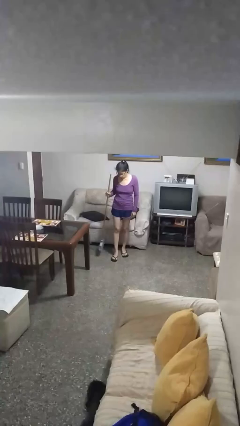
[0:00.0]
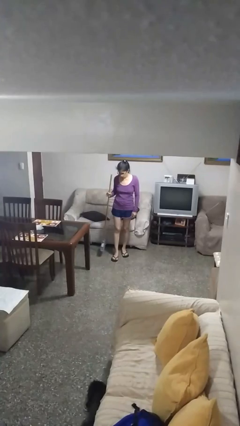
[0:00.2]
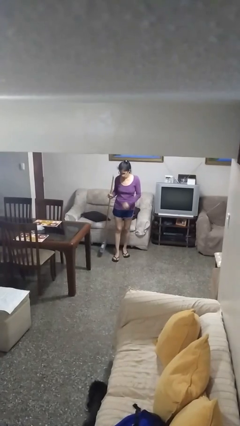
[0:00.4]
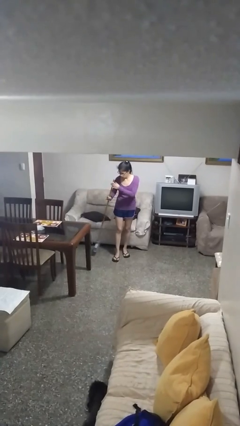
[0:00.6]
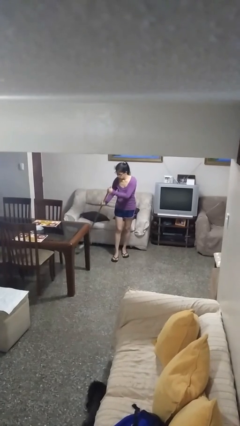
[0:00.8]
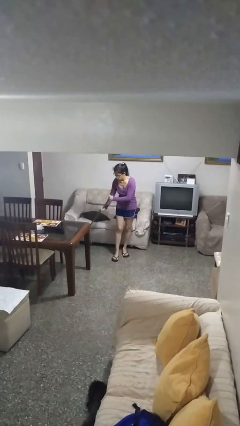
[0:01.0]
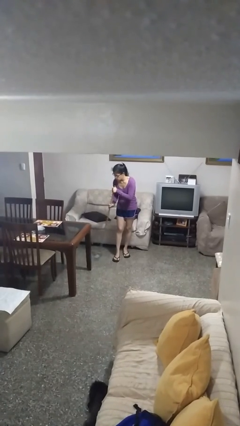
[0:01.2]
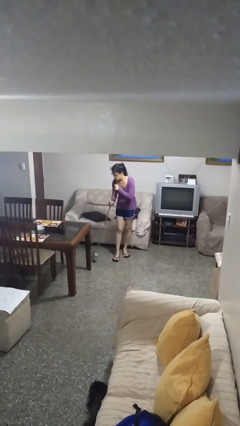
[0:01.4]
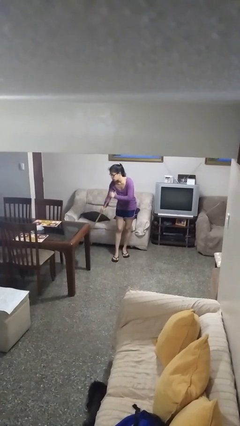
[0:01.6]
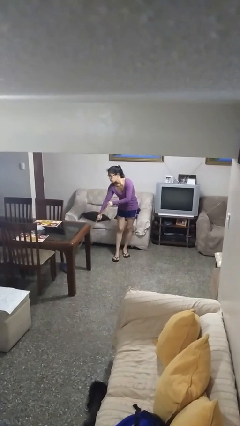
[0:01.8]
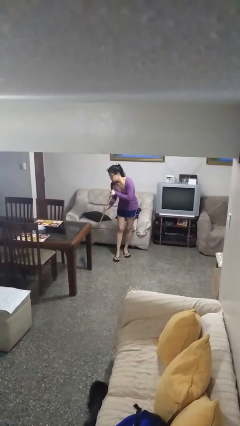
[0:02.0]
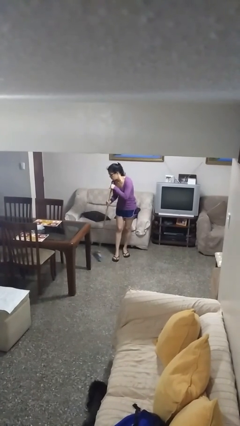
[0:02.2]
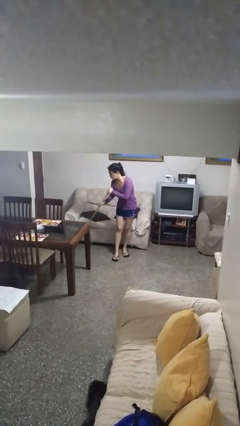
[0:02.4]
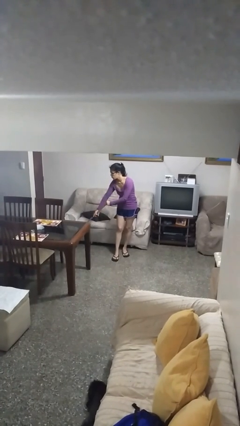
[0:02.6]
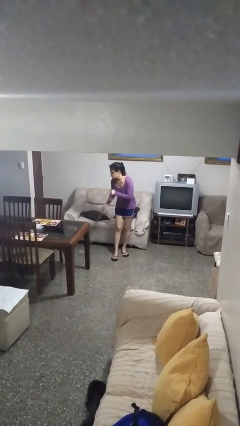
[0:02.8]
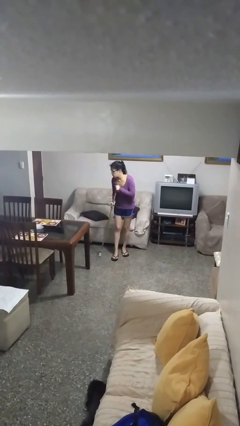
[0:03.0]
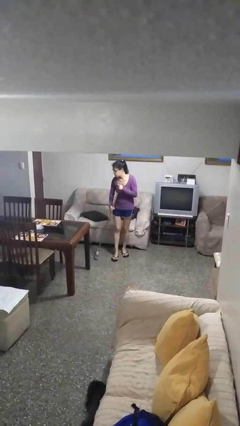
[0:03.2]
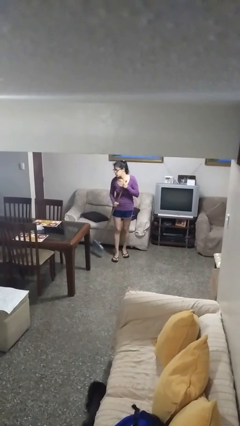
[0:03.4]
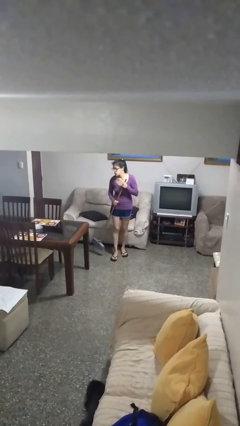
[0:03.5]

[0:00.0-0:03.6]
person sweeps floor

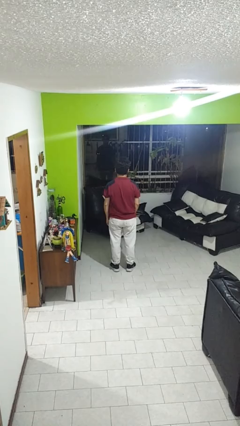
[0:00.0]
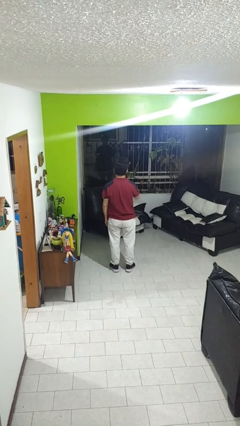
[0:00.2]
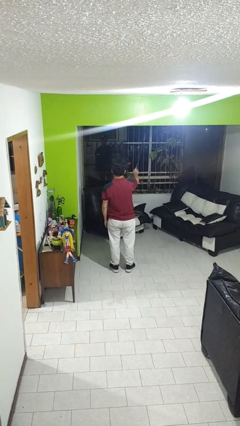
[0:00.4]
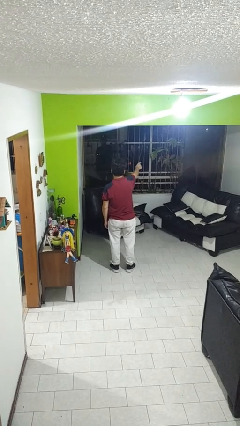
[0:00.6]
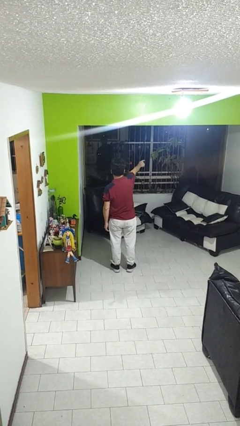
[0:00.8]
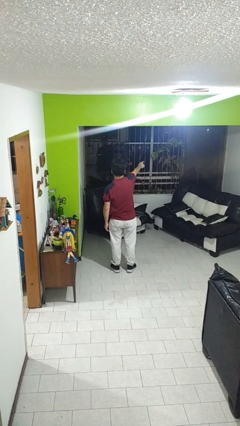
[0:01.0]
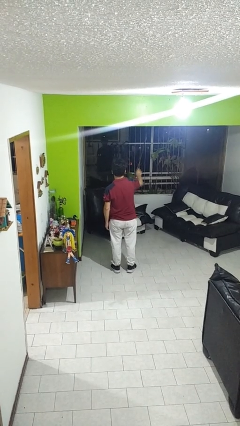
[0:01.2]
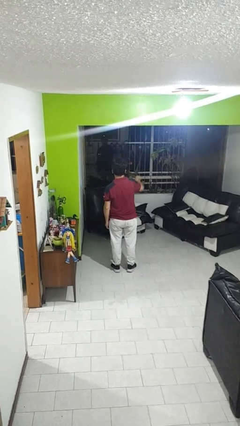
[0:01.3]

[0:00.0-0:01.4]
person points at person

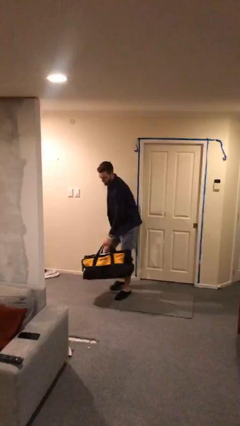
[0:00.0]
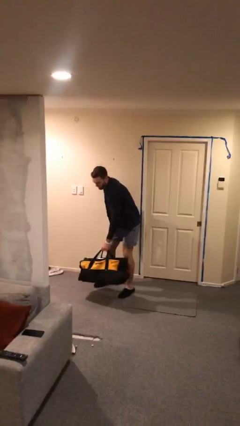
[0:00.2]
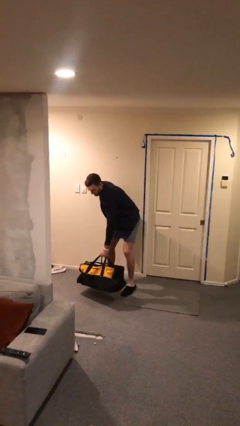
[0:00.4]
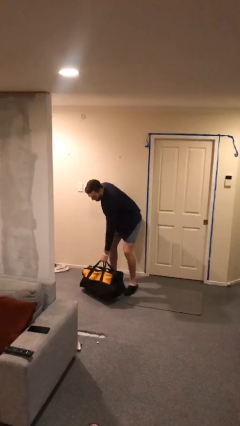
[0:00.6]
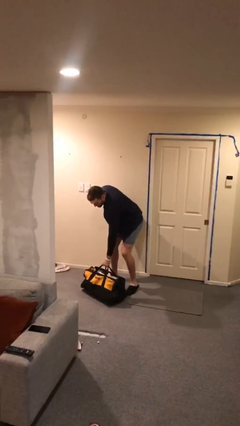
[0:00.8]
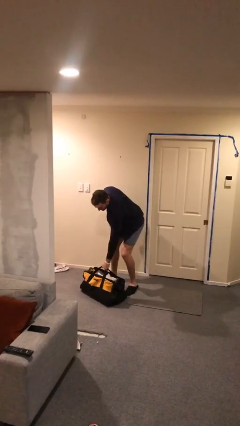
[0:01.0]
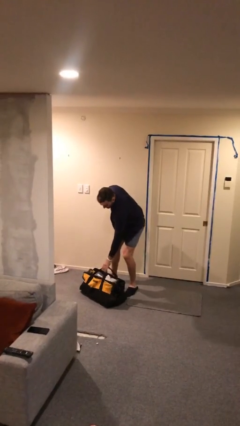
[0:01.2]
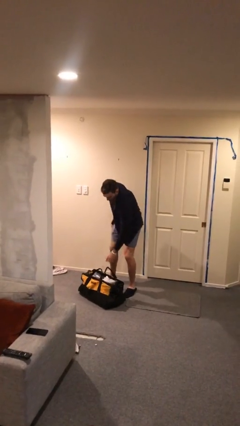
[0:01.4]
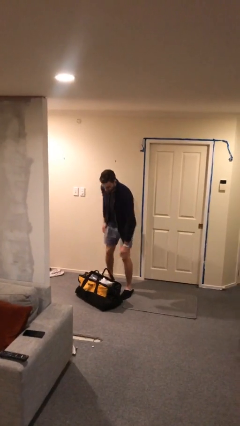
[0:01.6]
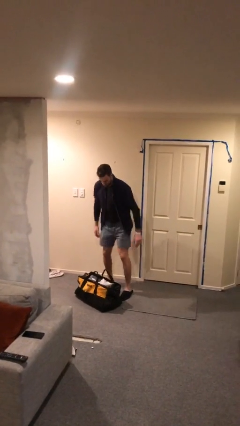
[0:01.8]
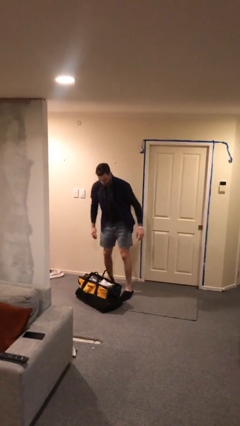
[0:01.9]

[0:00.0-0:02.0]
person puts down object on floor

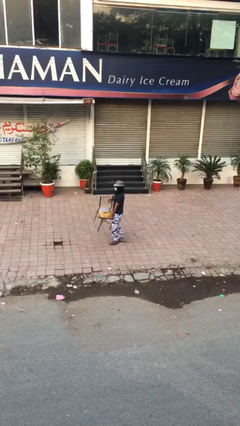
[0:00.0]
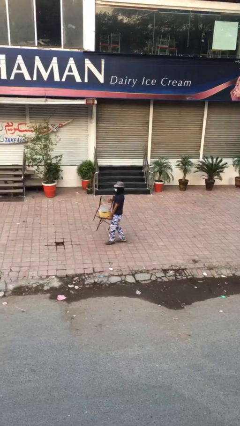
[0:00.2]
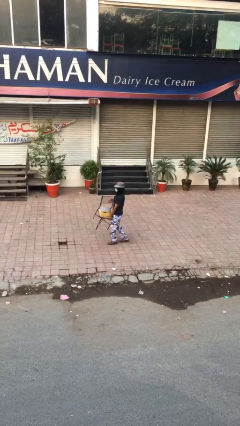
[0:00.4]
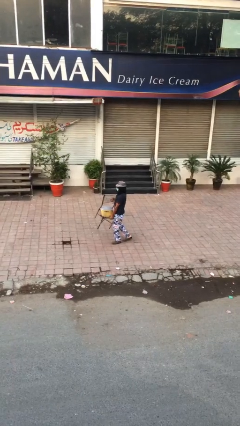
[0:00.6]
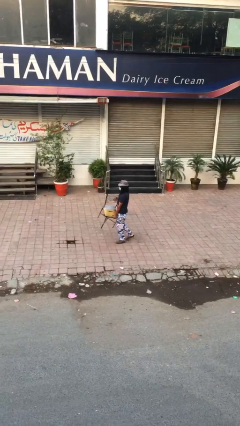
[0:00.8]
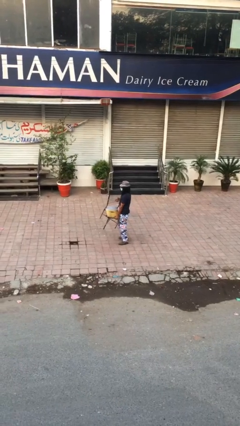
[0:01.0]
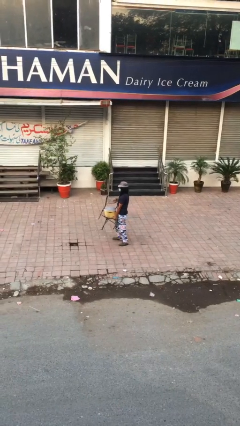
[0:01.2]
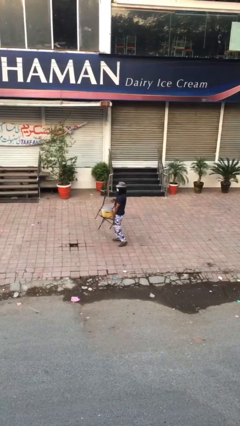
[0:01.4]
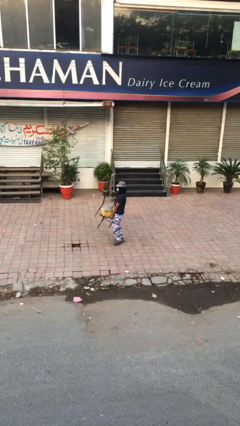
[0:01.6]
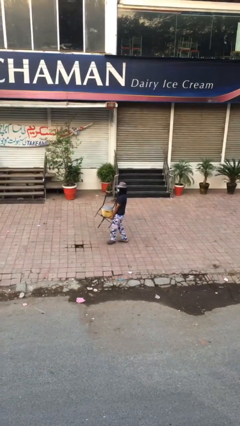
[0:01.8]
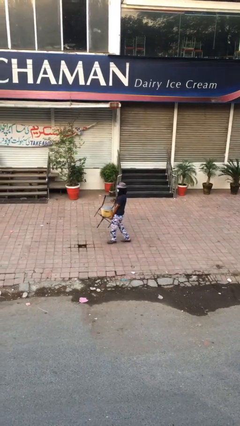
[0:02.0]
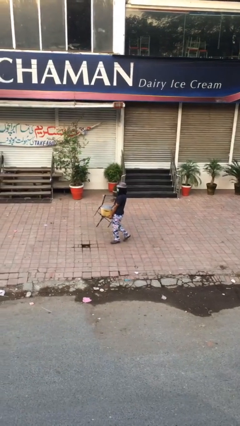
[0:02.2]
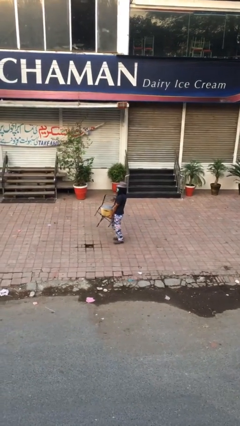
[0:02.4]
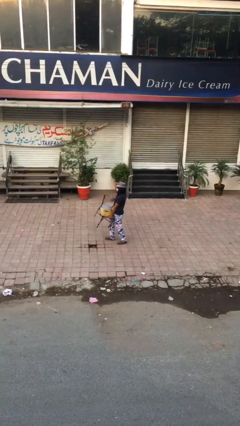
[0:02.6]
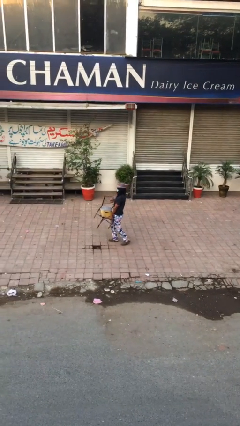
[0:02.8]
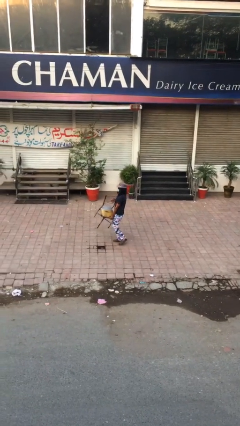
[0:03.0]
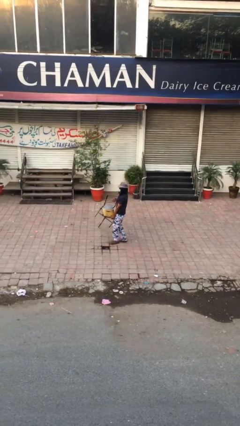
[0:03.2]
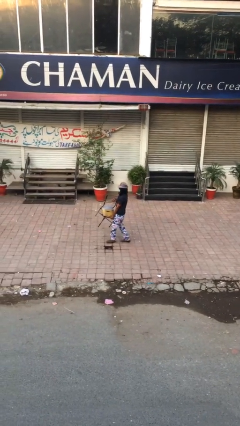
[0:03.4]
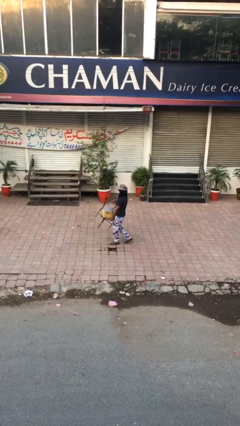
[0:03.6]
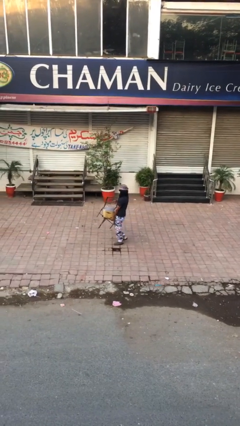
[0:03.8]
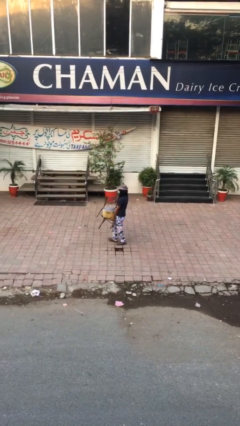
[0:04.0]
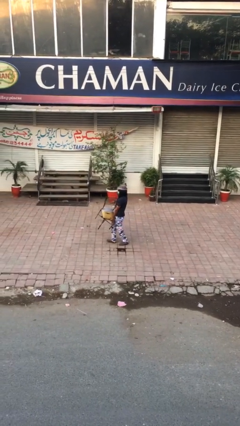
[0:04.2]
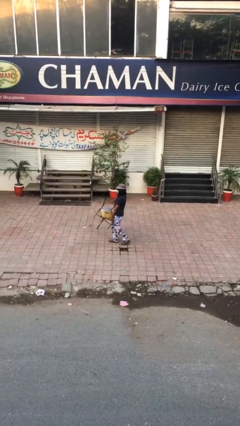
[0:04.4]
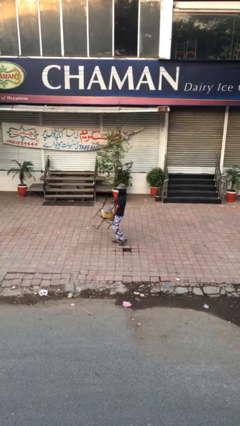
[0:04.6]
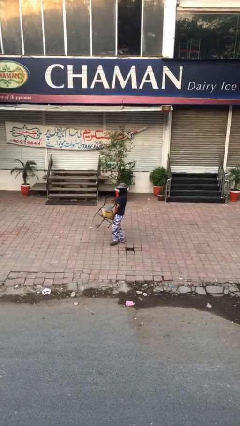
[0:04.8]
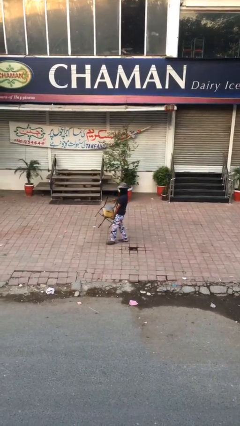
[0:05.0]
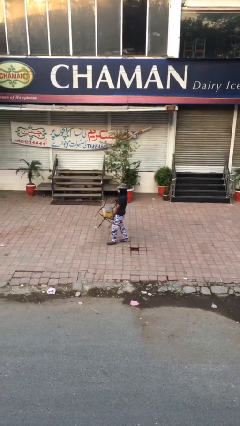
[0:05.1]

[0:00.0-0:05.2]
person carries heavy object

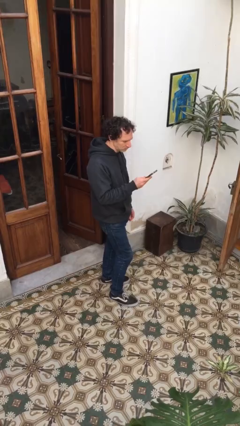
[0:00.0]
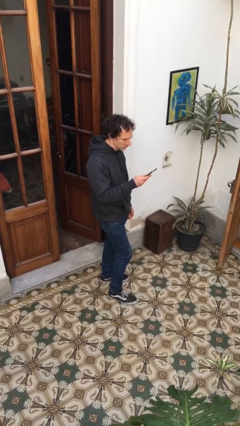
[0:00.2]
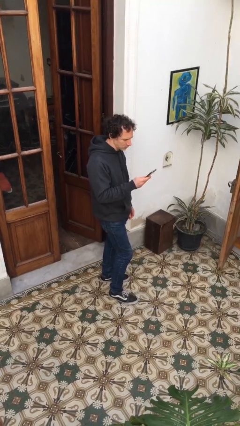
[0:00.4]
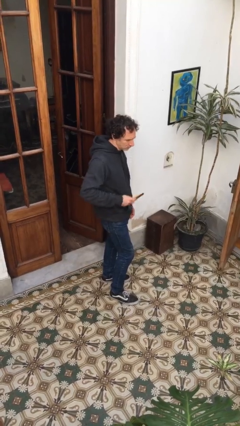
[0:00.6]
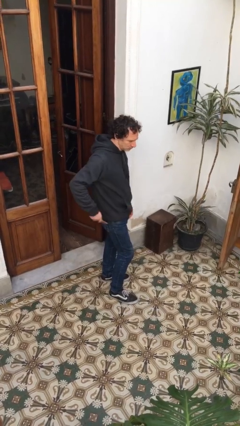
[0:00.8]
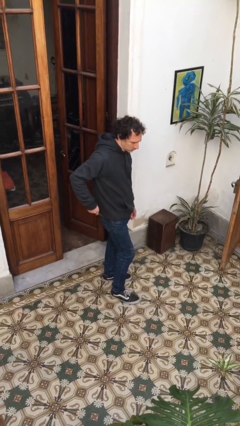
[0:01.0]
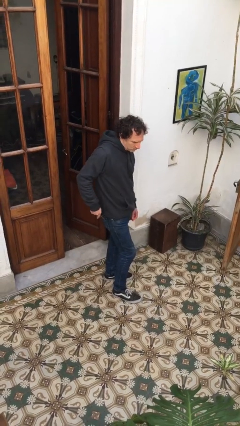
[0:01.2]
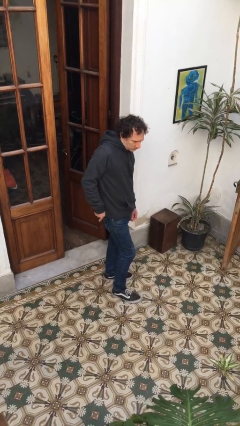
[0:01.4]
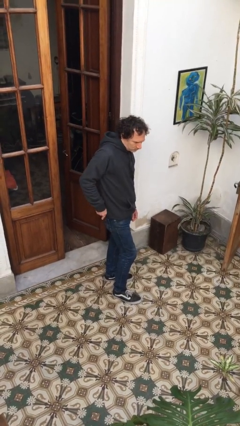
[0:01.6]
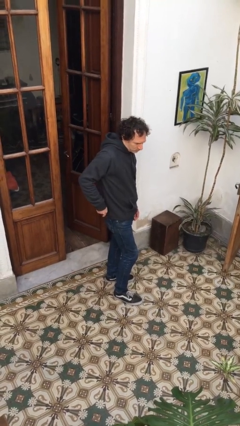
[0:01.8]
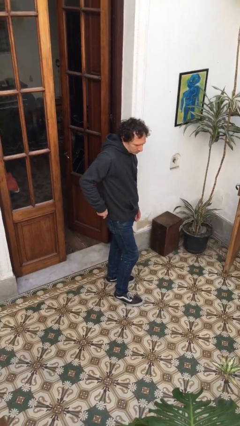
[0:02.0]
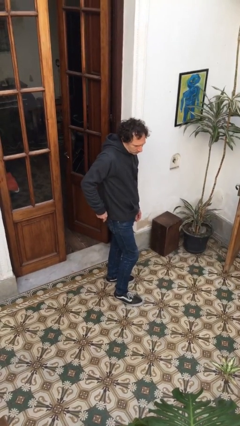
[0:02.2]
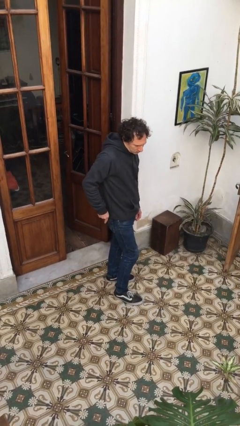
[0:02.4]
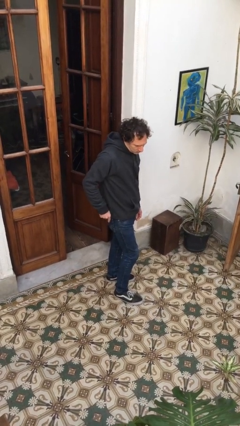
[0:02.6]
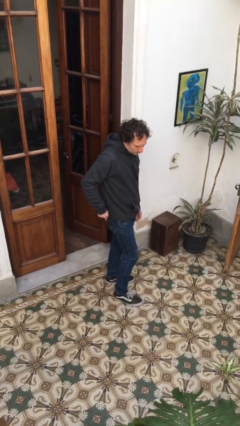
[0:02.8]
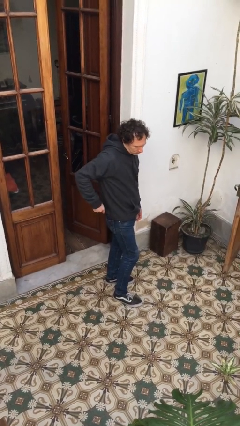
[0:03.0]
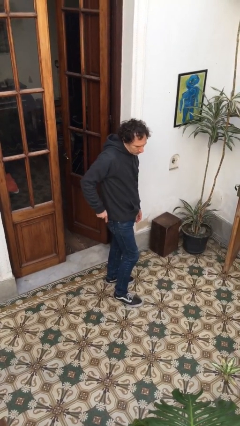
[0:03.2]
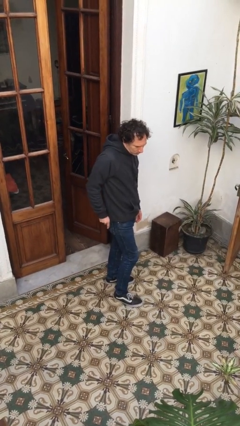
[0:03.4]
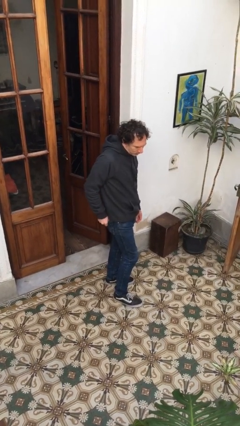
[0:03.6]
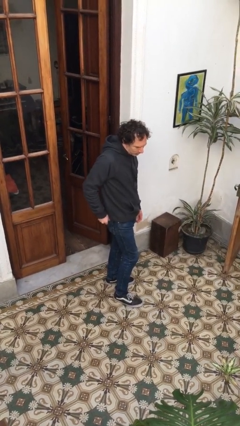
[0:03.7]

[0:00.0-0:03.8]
person puts phone into pocket

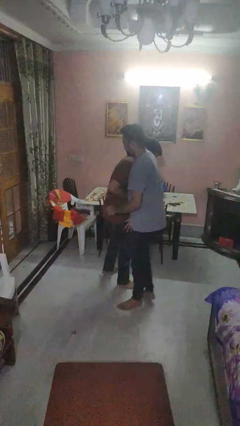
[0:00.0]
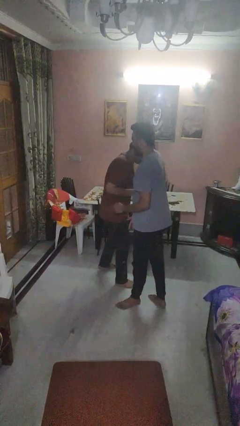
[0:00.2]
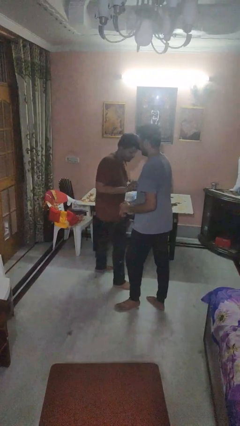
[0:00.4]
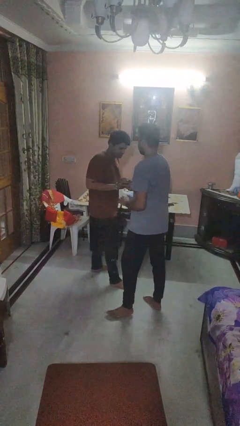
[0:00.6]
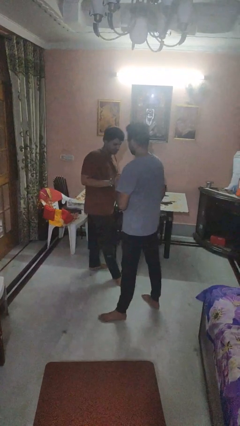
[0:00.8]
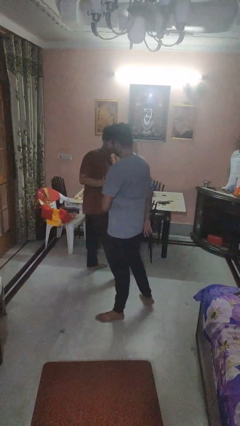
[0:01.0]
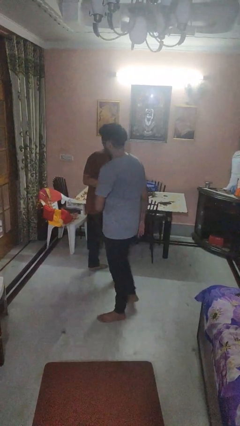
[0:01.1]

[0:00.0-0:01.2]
person bumps into person

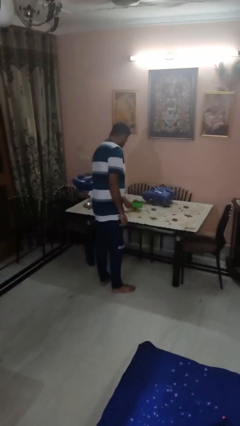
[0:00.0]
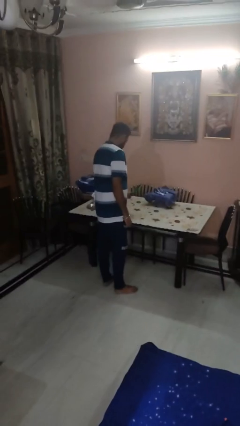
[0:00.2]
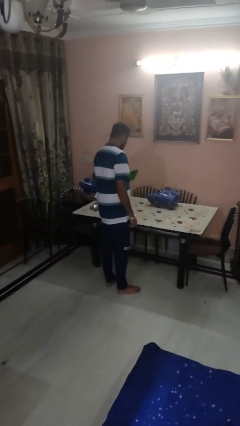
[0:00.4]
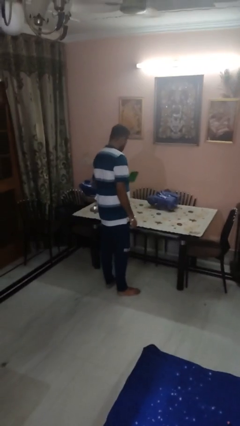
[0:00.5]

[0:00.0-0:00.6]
person picks up object from table
